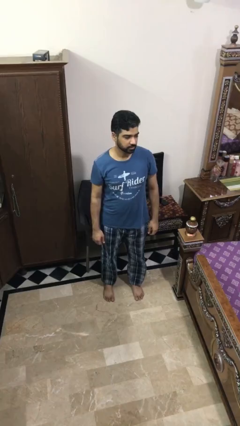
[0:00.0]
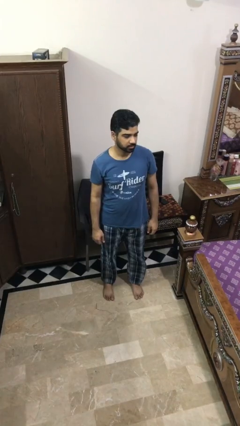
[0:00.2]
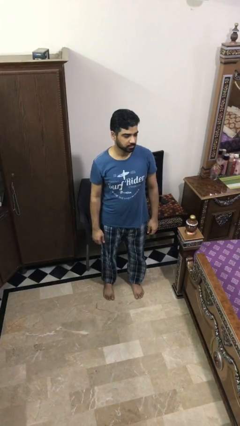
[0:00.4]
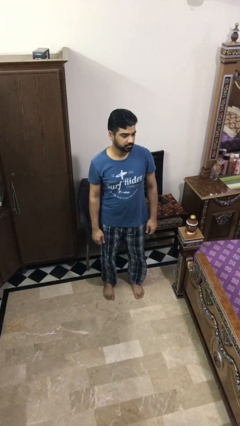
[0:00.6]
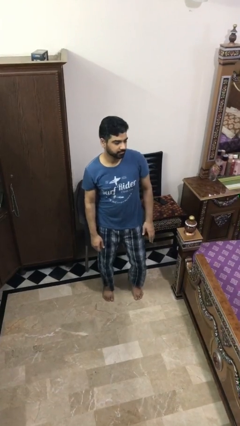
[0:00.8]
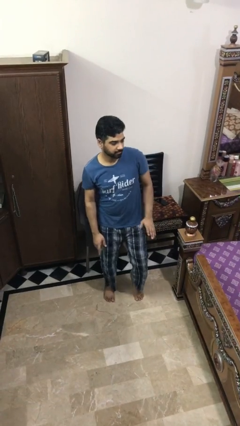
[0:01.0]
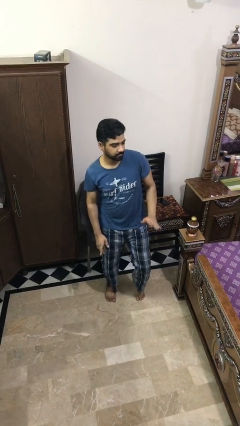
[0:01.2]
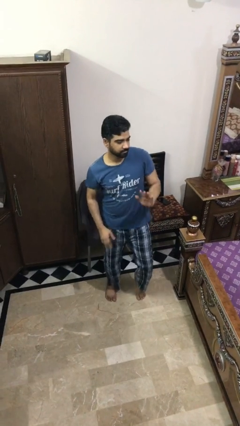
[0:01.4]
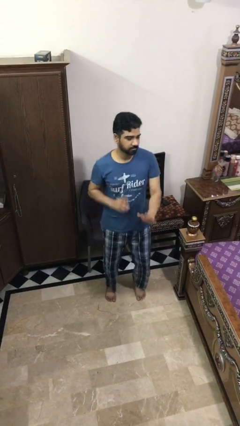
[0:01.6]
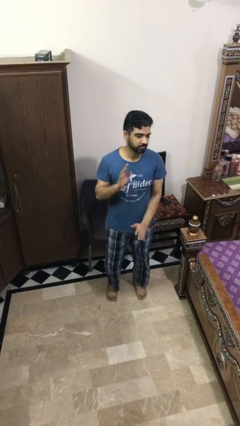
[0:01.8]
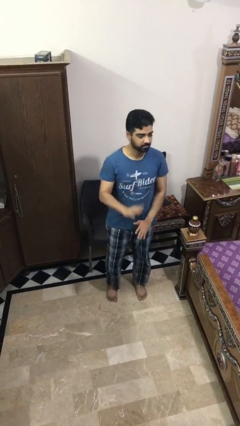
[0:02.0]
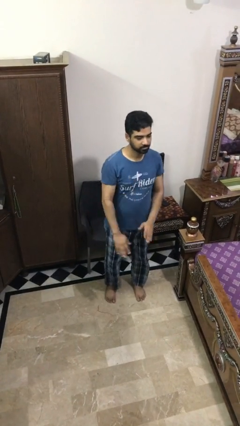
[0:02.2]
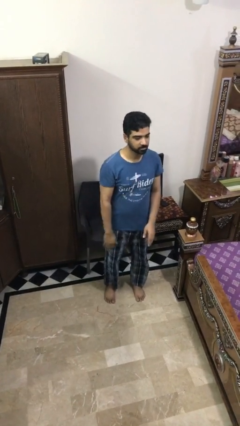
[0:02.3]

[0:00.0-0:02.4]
person dances in place

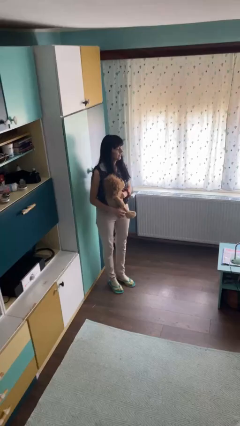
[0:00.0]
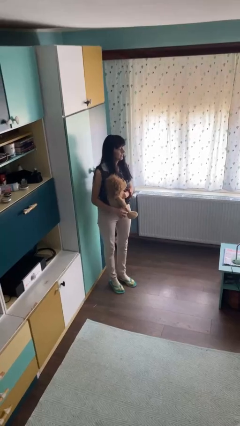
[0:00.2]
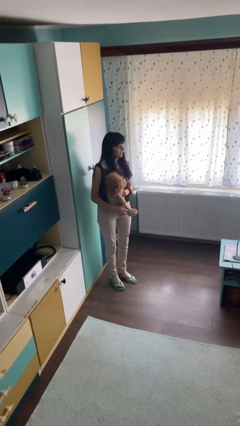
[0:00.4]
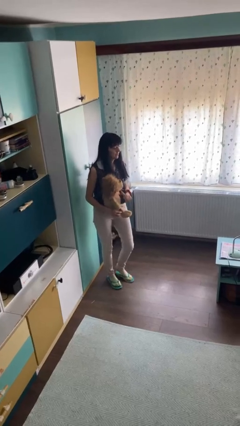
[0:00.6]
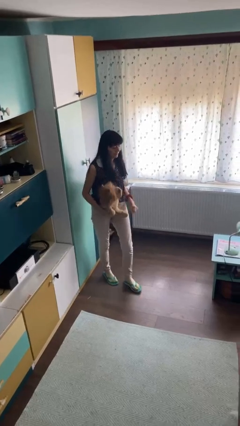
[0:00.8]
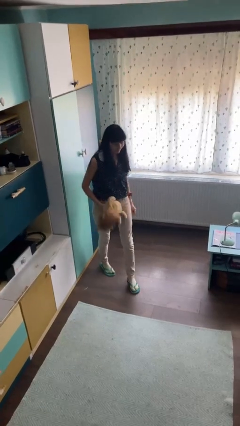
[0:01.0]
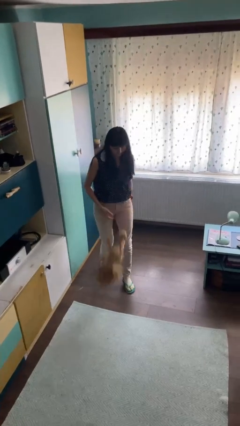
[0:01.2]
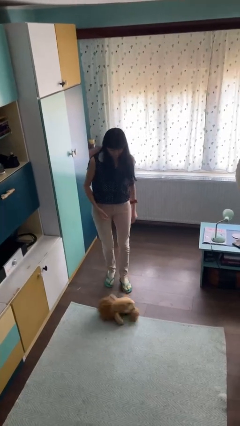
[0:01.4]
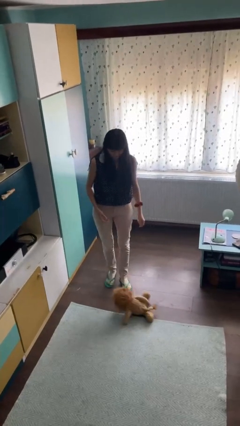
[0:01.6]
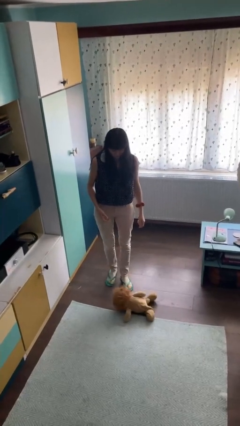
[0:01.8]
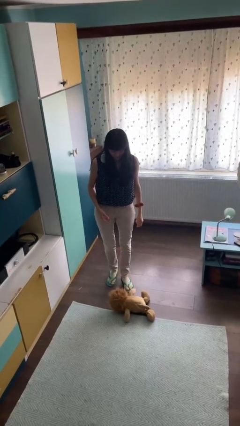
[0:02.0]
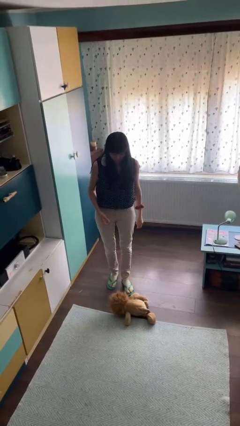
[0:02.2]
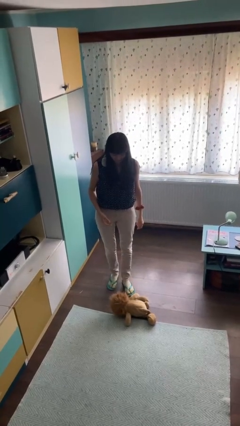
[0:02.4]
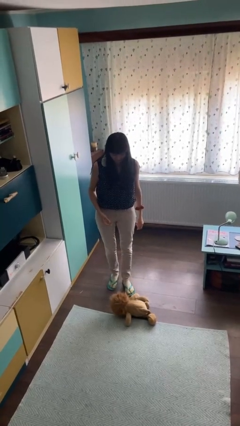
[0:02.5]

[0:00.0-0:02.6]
person drops object

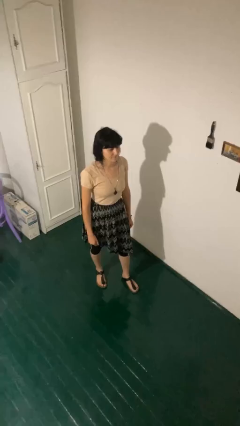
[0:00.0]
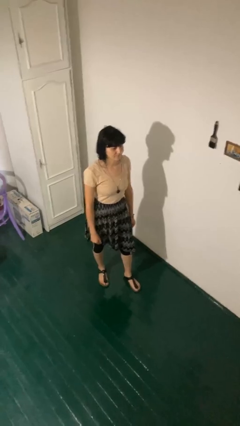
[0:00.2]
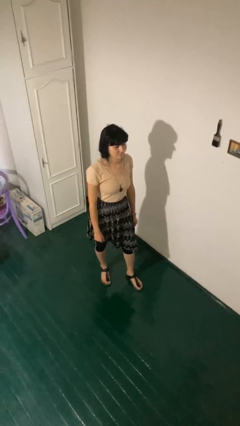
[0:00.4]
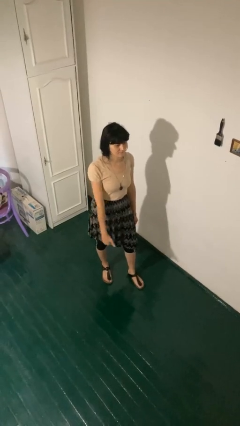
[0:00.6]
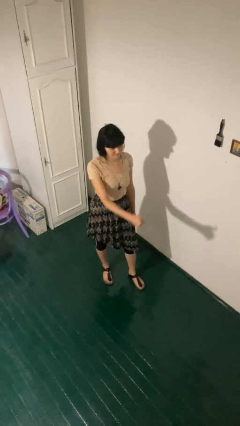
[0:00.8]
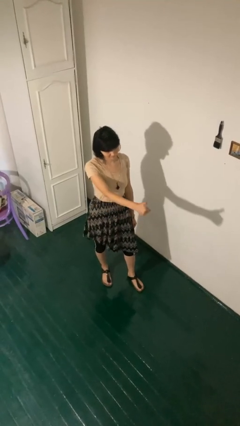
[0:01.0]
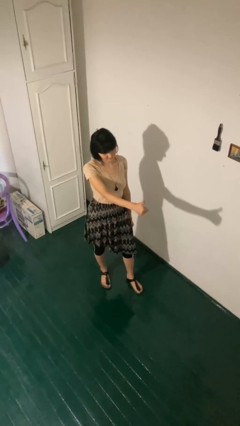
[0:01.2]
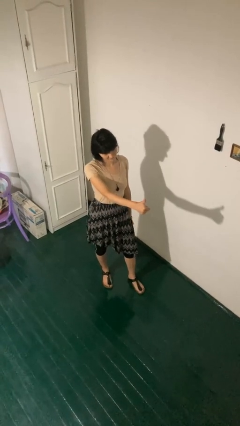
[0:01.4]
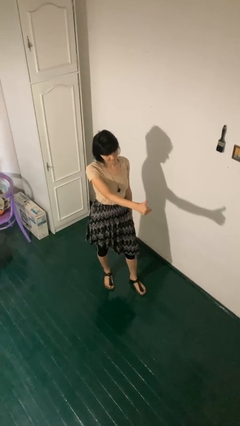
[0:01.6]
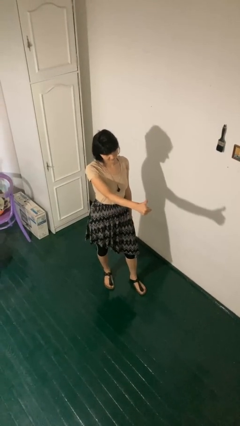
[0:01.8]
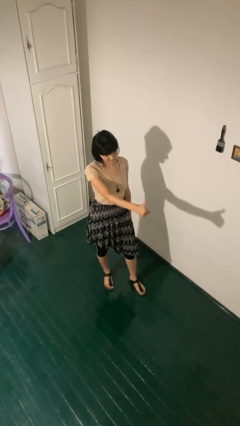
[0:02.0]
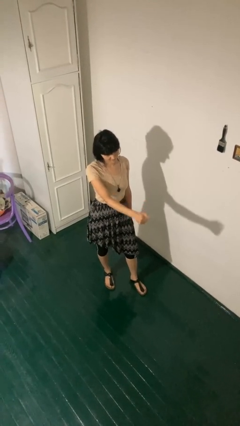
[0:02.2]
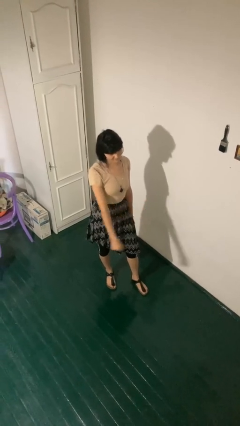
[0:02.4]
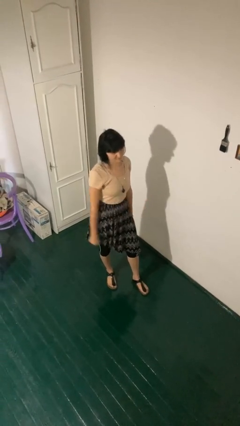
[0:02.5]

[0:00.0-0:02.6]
person gestures thumbs up

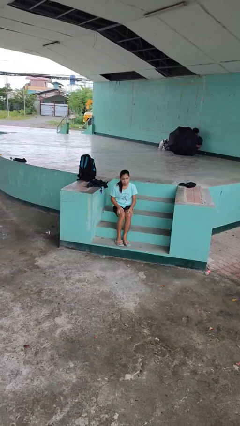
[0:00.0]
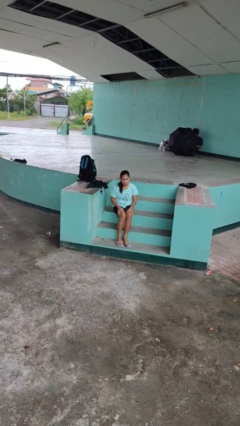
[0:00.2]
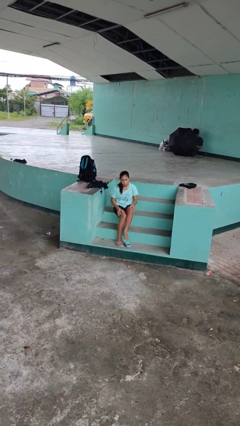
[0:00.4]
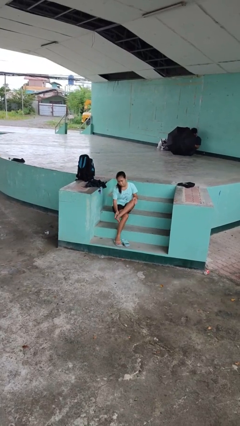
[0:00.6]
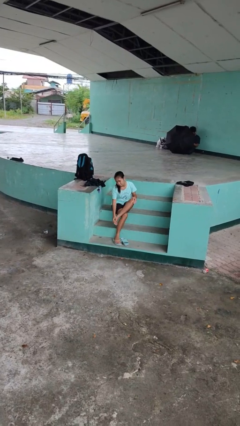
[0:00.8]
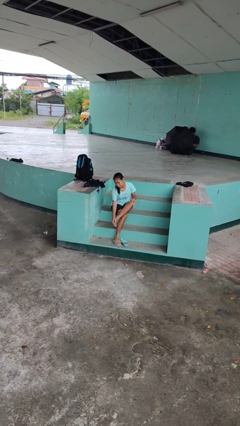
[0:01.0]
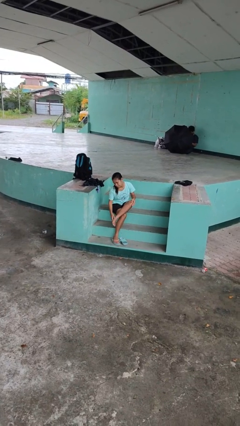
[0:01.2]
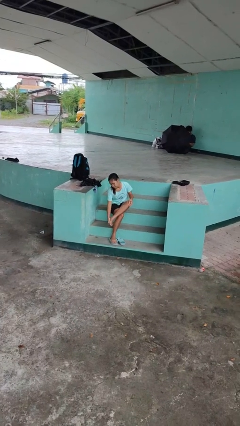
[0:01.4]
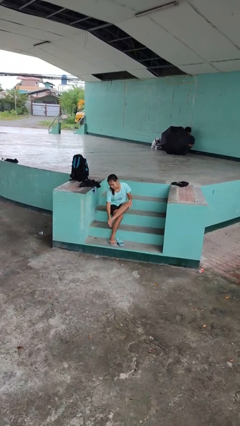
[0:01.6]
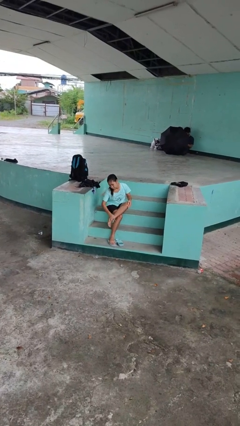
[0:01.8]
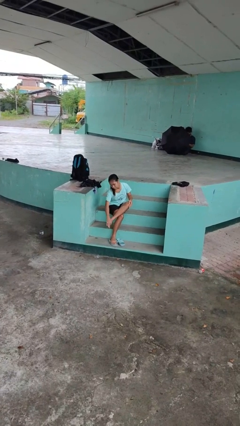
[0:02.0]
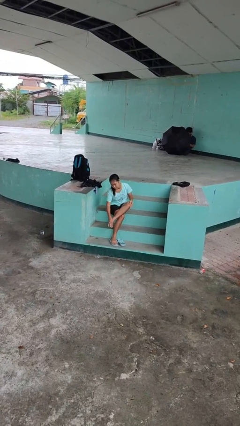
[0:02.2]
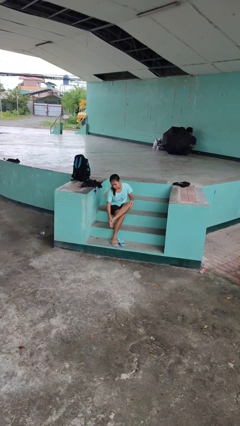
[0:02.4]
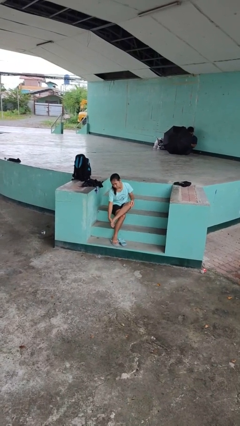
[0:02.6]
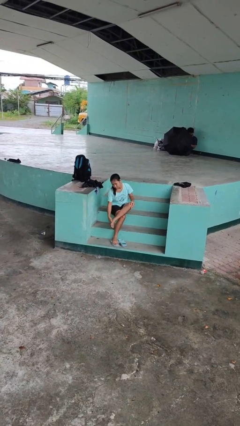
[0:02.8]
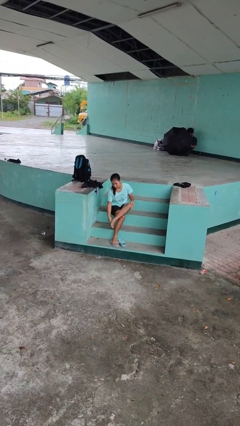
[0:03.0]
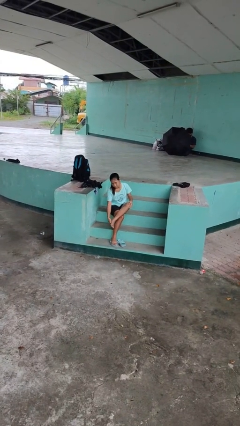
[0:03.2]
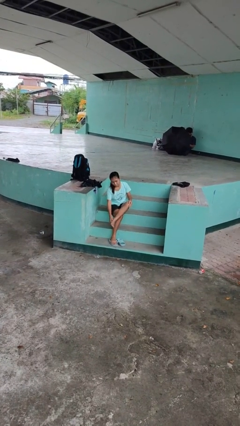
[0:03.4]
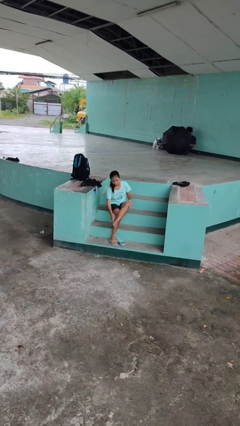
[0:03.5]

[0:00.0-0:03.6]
person rubs foot

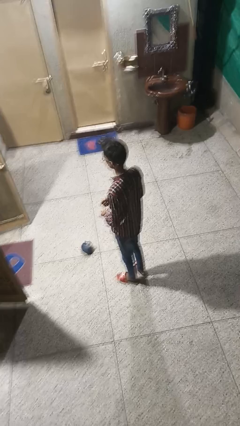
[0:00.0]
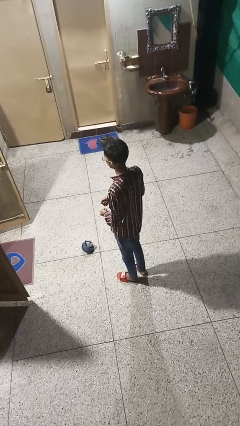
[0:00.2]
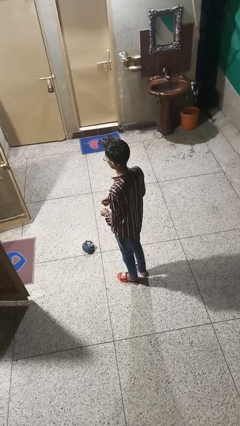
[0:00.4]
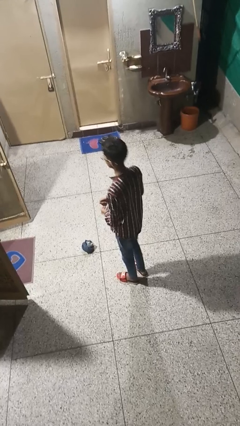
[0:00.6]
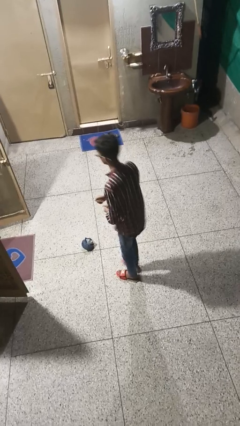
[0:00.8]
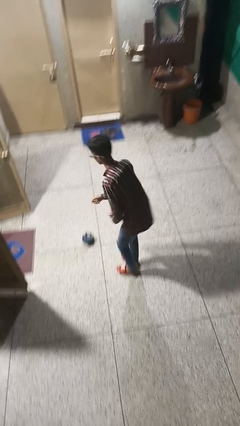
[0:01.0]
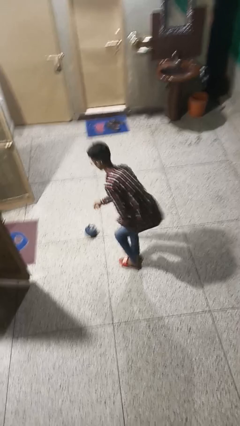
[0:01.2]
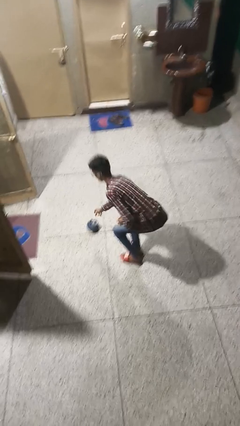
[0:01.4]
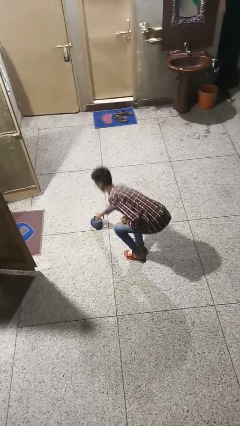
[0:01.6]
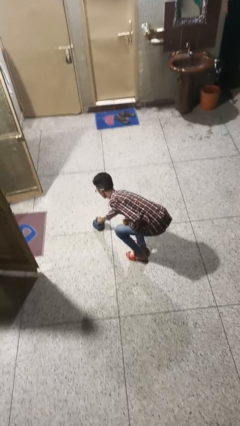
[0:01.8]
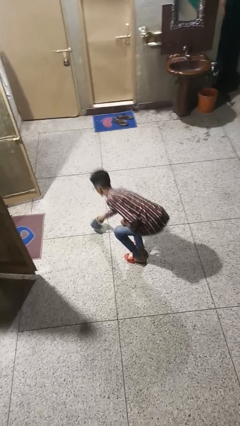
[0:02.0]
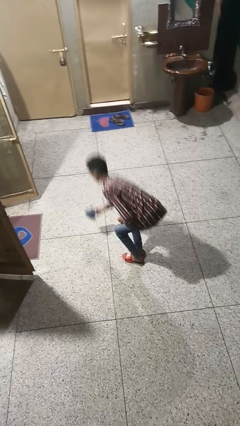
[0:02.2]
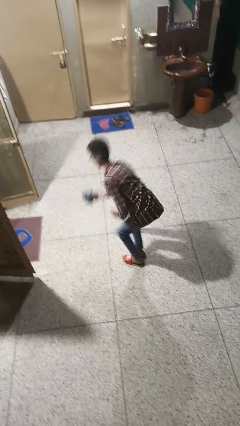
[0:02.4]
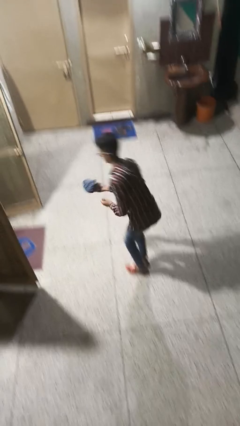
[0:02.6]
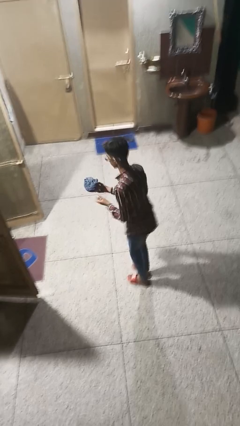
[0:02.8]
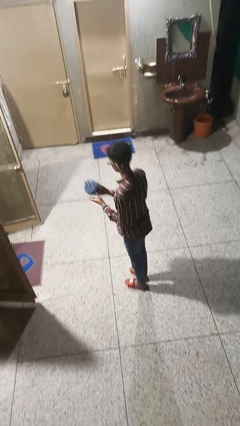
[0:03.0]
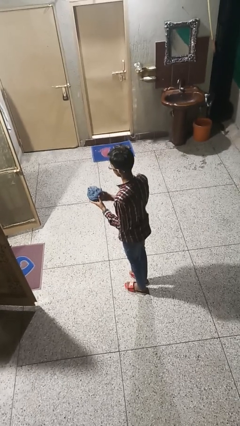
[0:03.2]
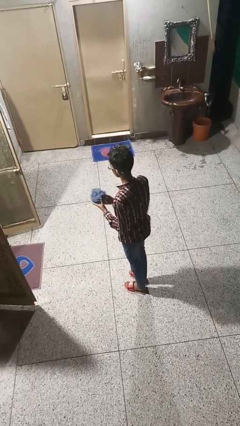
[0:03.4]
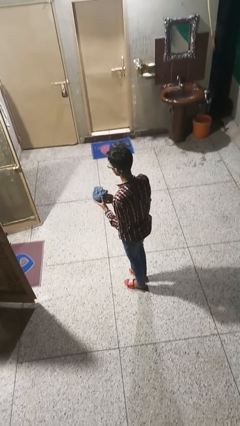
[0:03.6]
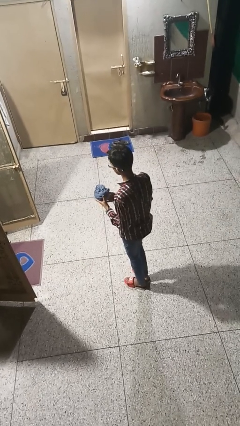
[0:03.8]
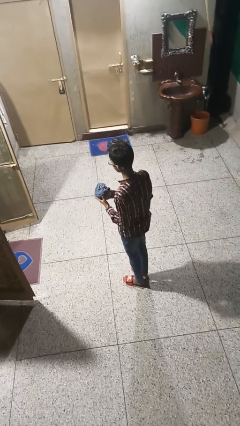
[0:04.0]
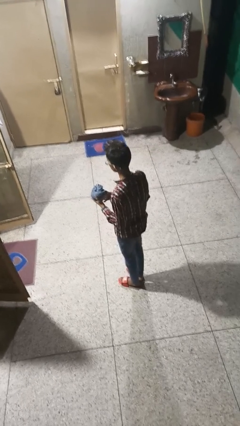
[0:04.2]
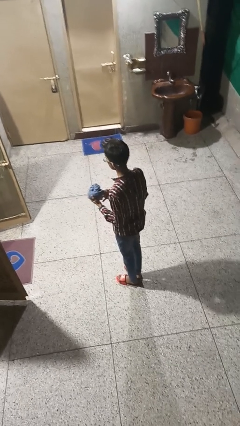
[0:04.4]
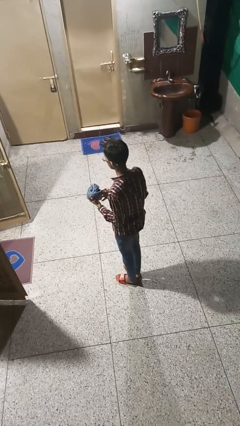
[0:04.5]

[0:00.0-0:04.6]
person picks up object from floor

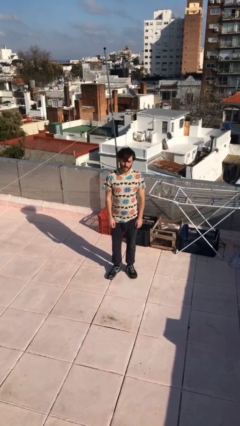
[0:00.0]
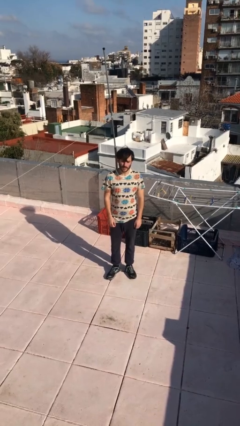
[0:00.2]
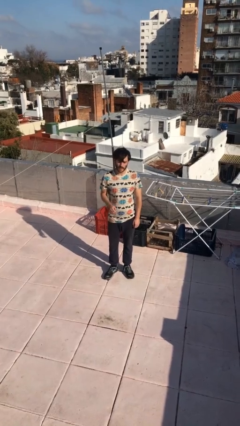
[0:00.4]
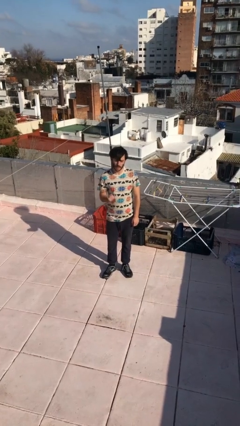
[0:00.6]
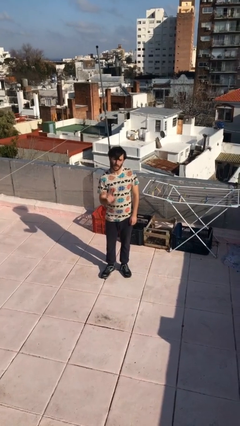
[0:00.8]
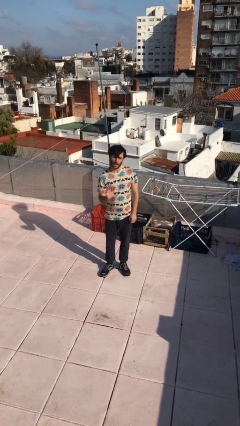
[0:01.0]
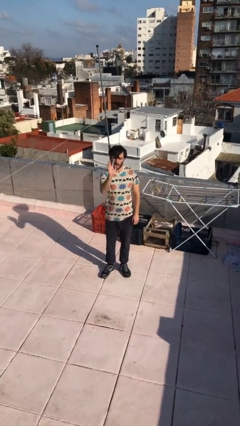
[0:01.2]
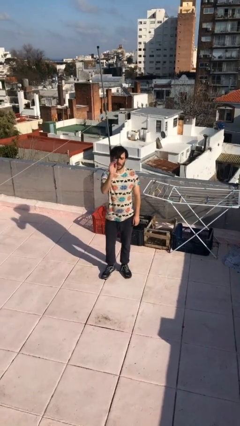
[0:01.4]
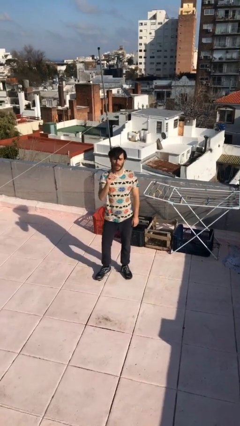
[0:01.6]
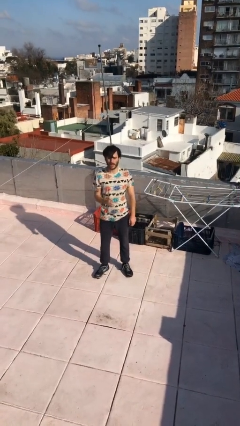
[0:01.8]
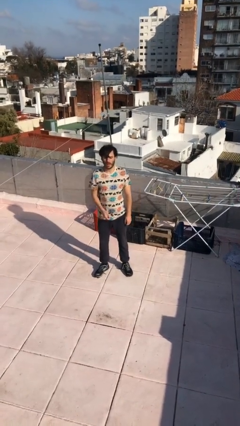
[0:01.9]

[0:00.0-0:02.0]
person gestures swipe up
